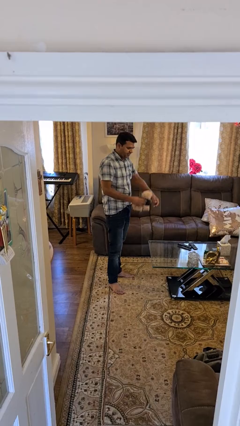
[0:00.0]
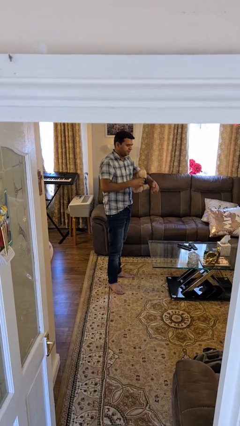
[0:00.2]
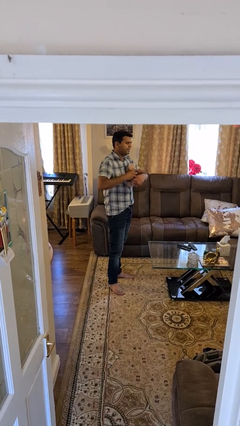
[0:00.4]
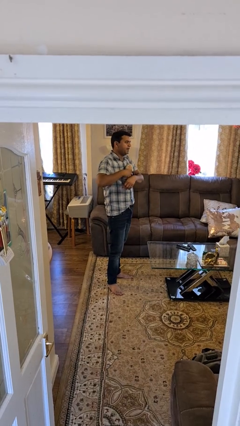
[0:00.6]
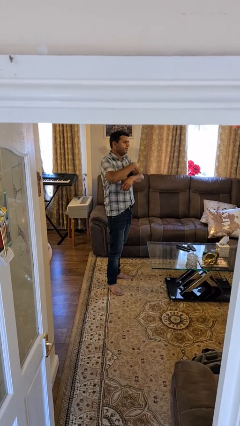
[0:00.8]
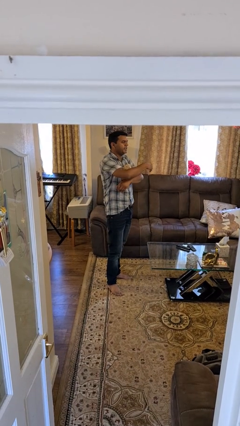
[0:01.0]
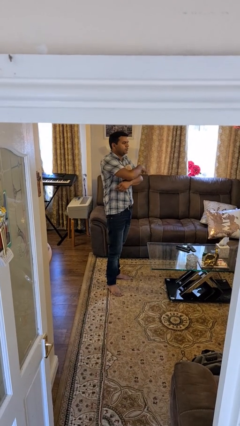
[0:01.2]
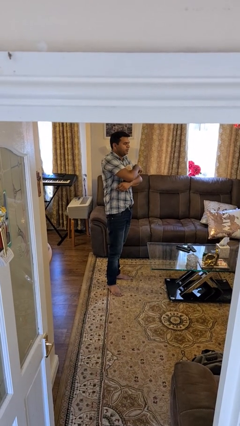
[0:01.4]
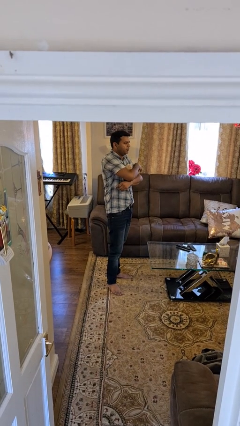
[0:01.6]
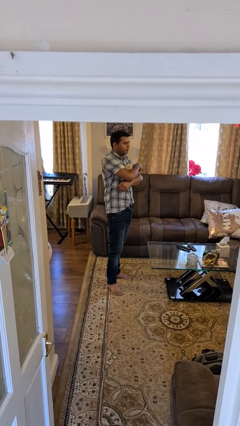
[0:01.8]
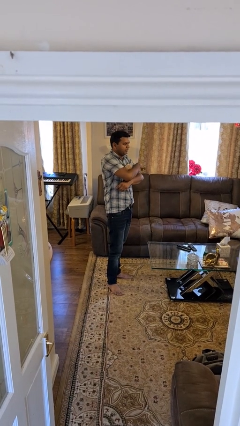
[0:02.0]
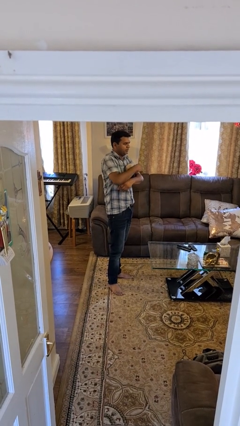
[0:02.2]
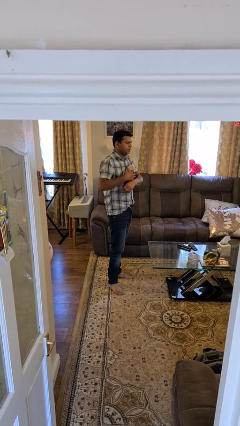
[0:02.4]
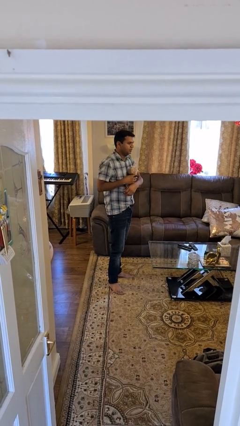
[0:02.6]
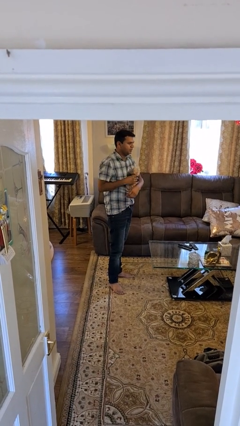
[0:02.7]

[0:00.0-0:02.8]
person hugs stuffed animal

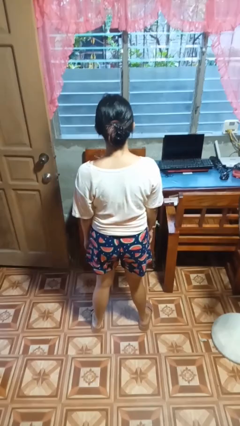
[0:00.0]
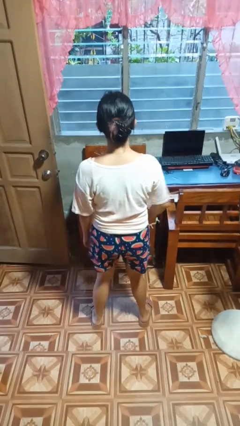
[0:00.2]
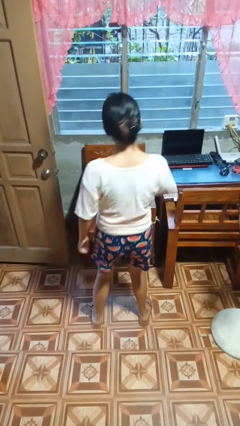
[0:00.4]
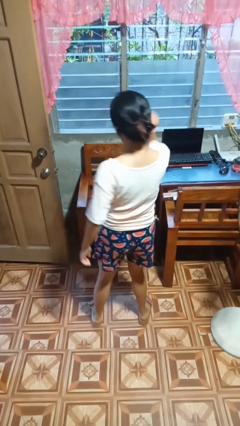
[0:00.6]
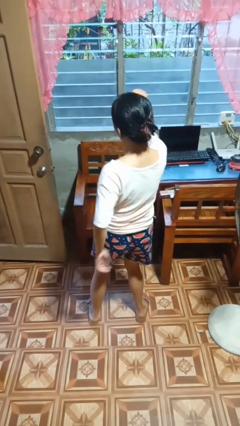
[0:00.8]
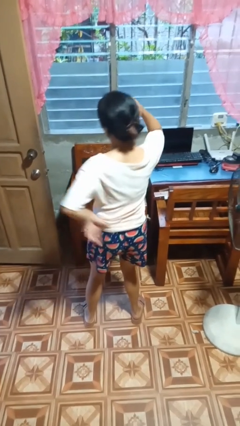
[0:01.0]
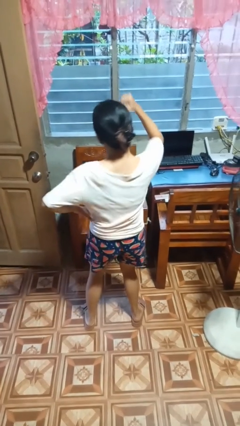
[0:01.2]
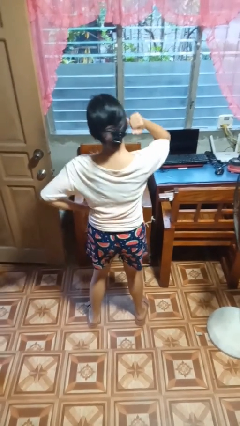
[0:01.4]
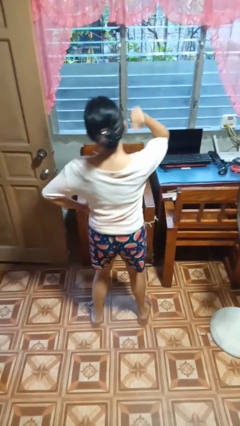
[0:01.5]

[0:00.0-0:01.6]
person dances in place

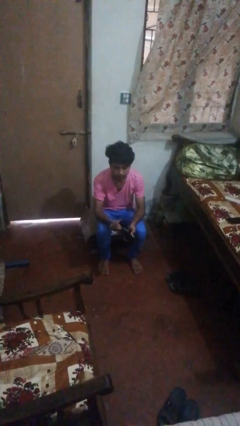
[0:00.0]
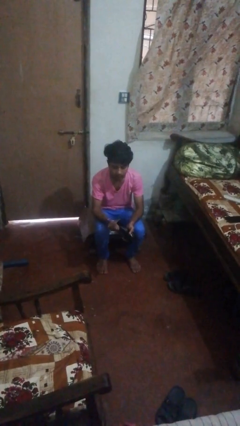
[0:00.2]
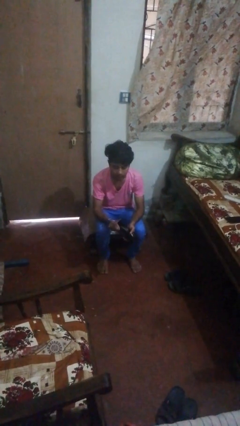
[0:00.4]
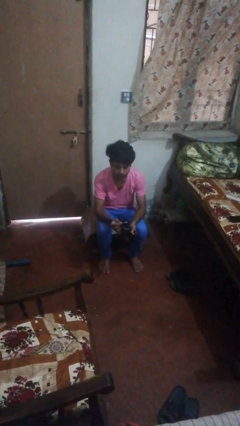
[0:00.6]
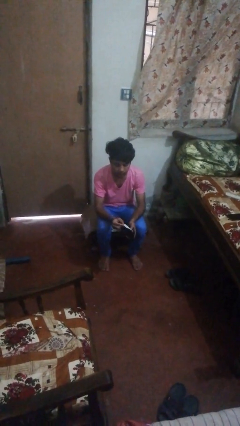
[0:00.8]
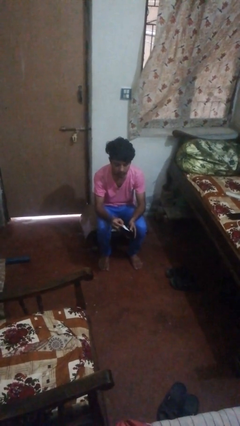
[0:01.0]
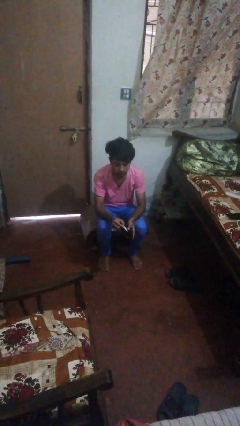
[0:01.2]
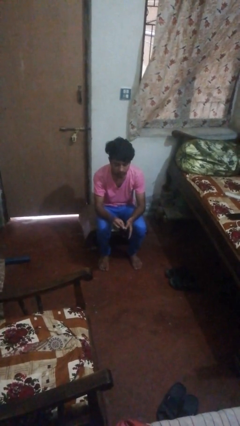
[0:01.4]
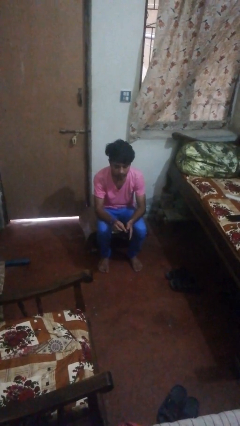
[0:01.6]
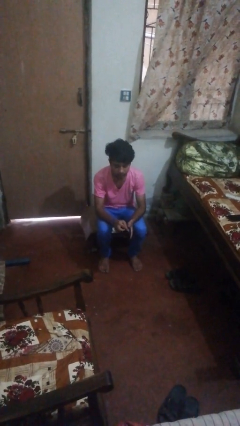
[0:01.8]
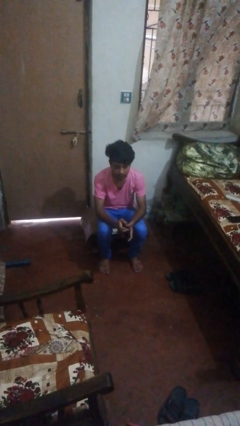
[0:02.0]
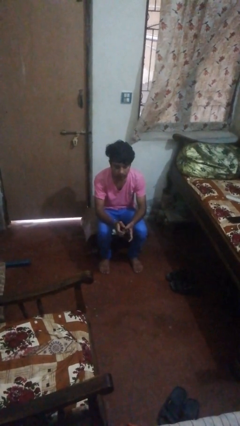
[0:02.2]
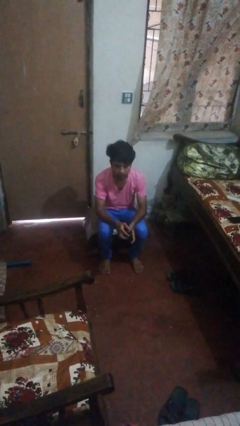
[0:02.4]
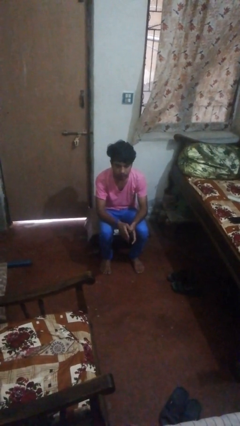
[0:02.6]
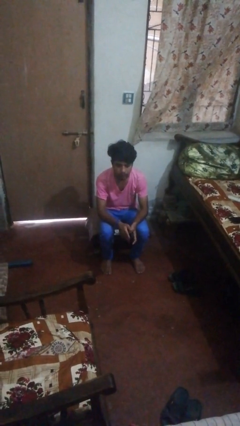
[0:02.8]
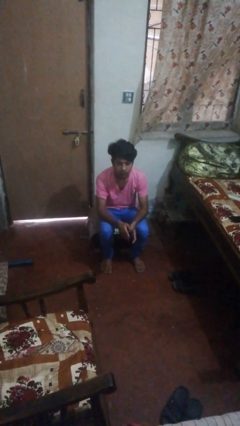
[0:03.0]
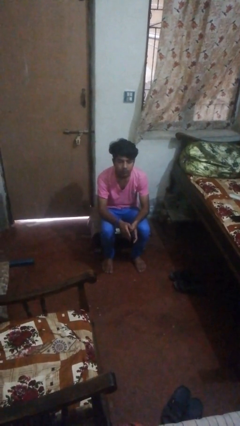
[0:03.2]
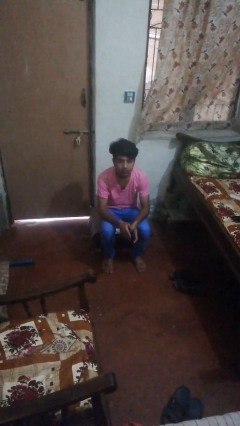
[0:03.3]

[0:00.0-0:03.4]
person puts object into purse

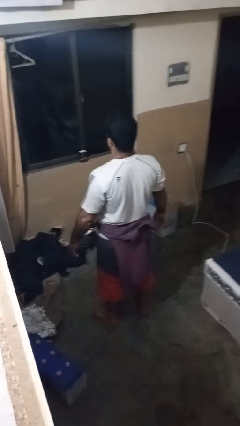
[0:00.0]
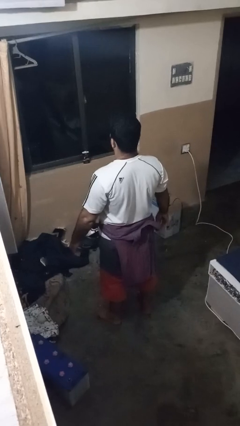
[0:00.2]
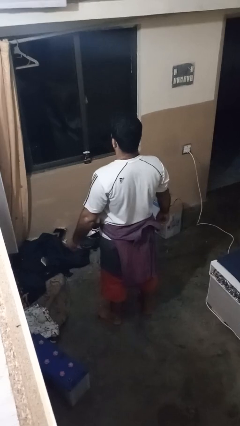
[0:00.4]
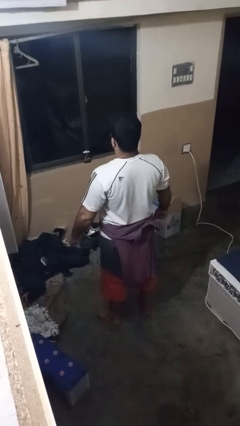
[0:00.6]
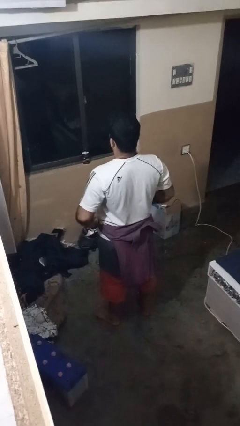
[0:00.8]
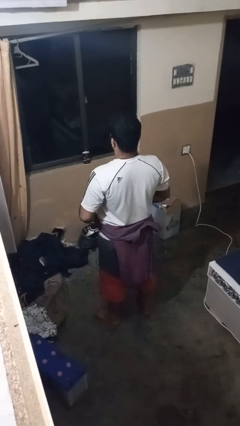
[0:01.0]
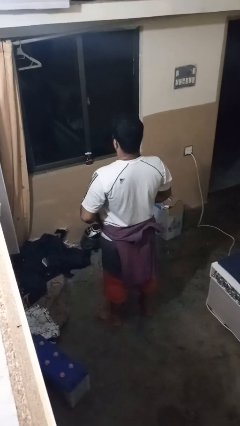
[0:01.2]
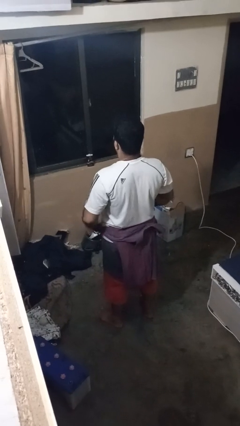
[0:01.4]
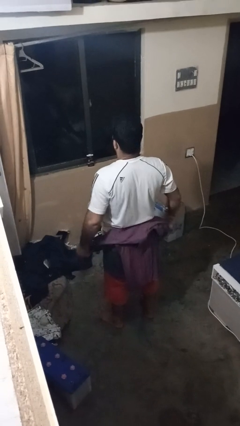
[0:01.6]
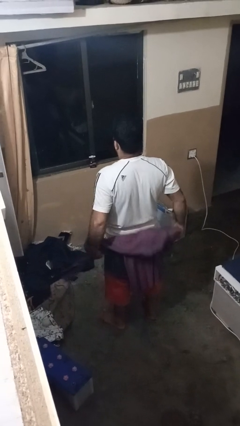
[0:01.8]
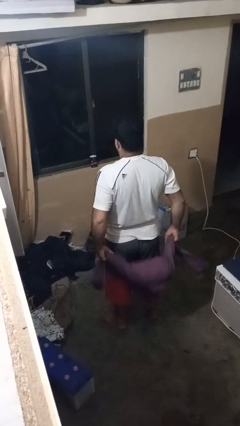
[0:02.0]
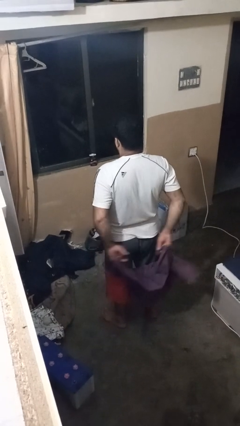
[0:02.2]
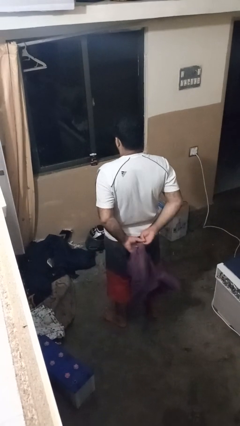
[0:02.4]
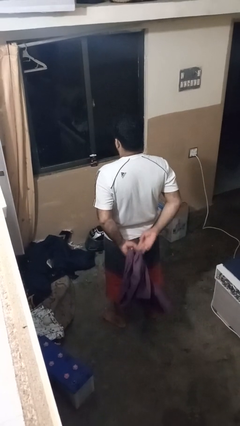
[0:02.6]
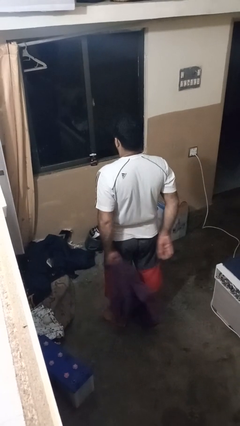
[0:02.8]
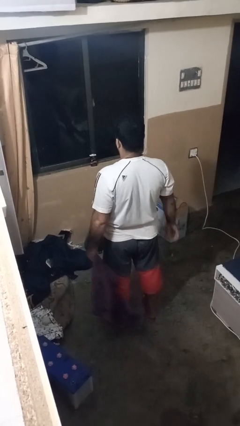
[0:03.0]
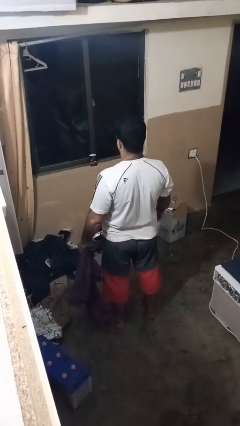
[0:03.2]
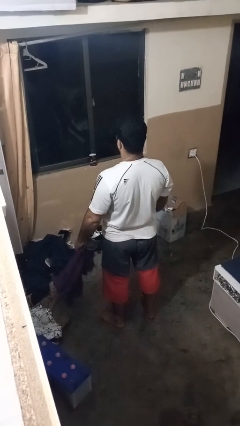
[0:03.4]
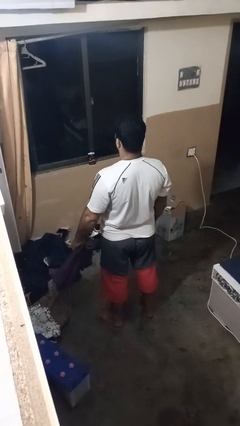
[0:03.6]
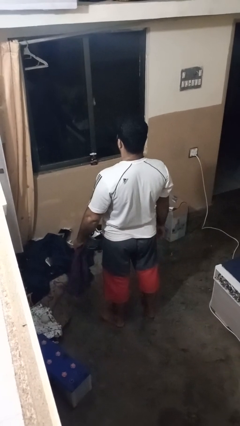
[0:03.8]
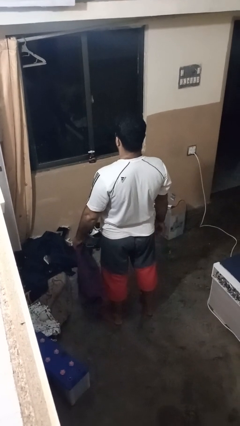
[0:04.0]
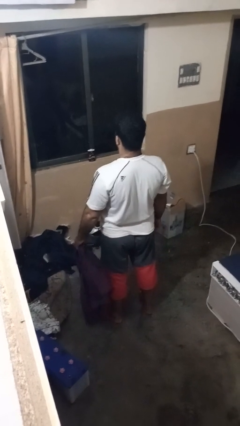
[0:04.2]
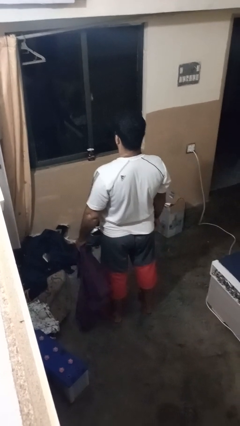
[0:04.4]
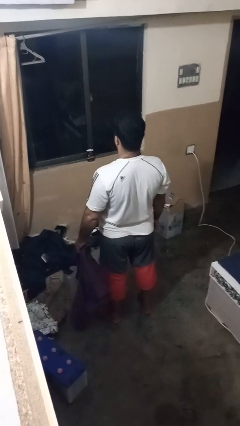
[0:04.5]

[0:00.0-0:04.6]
person unties jacket around waist

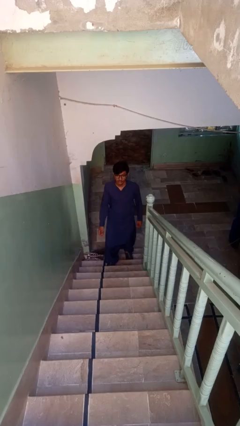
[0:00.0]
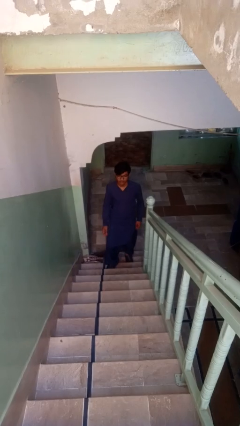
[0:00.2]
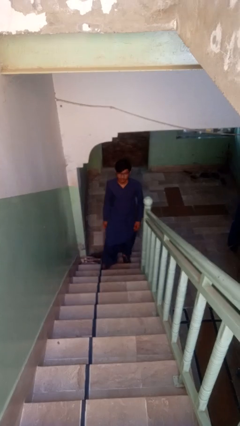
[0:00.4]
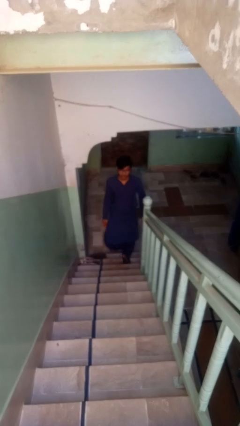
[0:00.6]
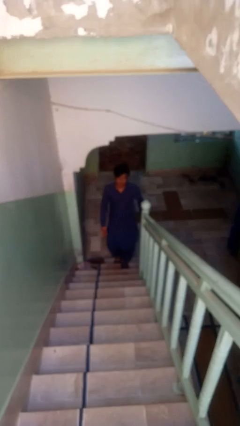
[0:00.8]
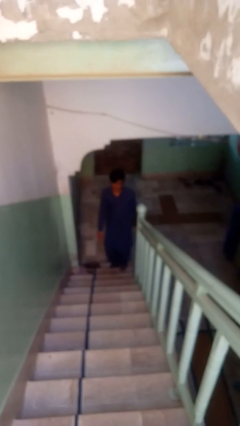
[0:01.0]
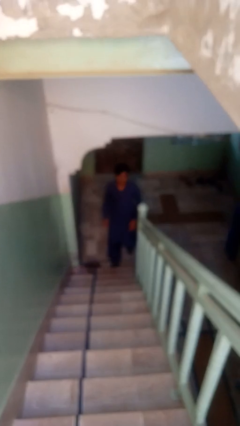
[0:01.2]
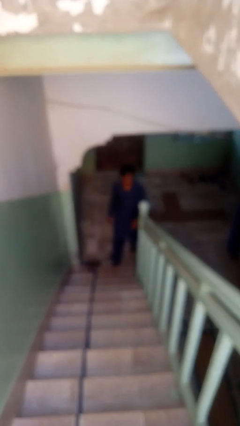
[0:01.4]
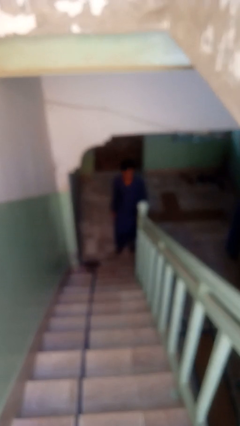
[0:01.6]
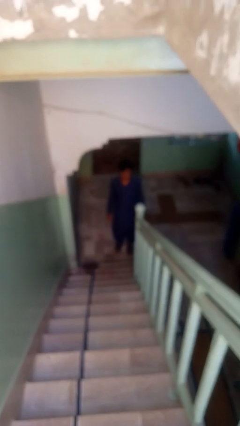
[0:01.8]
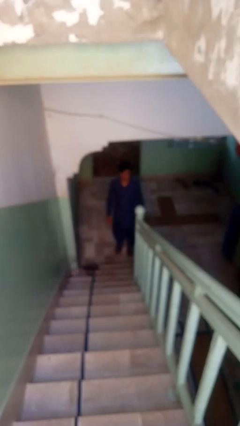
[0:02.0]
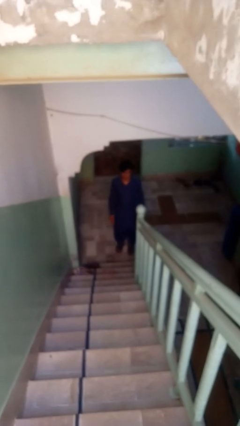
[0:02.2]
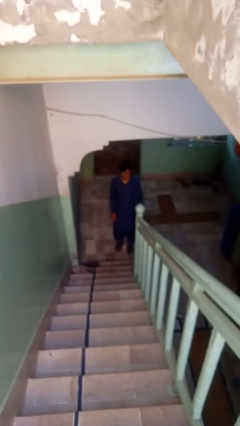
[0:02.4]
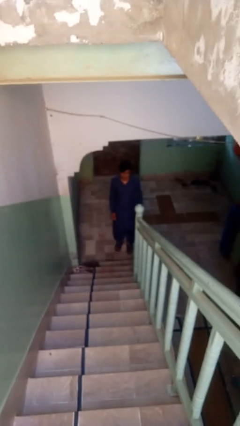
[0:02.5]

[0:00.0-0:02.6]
person climbs down stairs

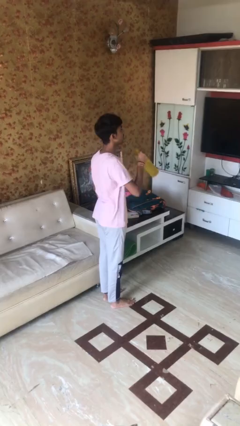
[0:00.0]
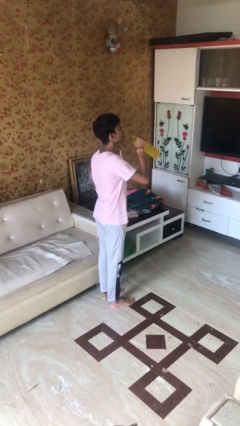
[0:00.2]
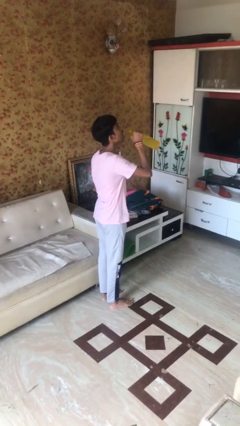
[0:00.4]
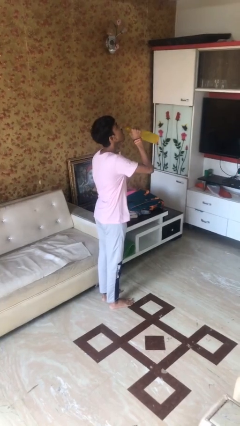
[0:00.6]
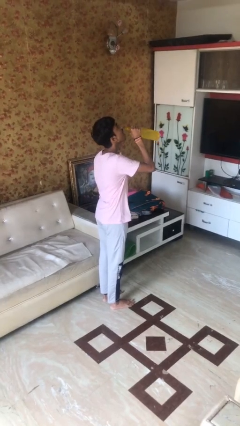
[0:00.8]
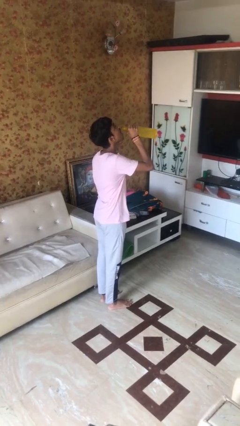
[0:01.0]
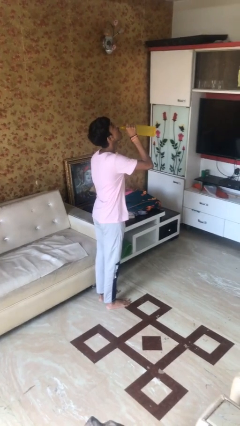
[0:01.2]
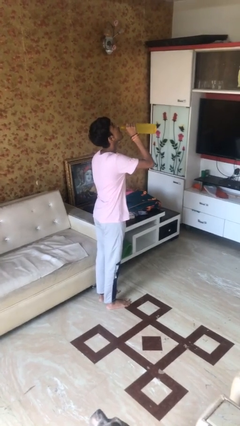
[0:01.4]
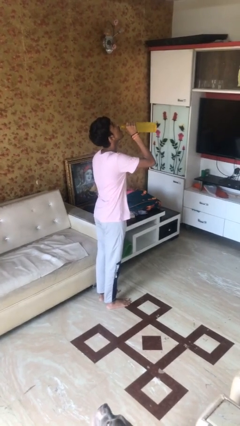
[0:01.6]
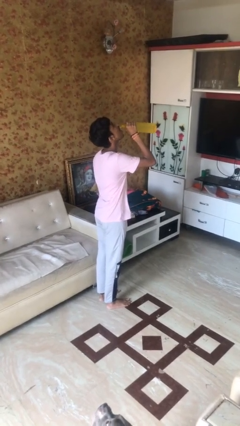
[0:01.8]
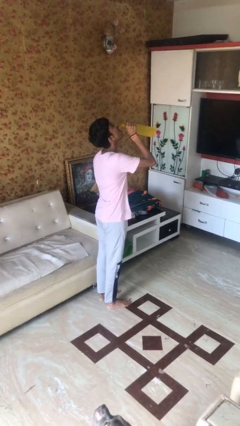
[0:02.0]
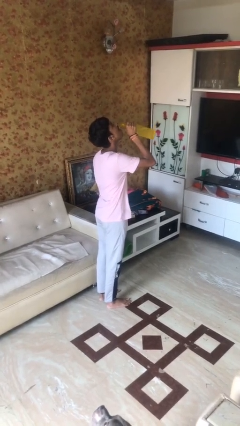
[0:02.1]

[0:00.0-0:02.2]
person drinks from bottle
